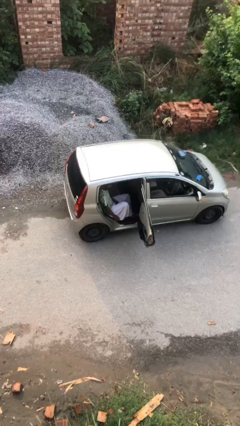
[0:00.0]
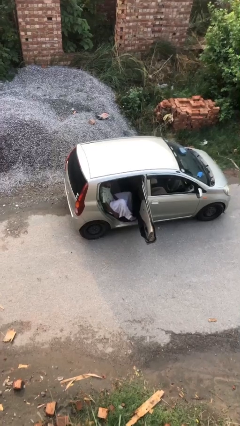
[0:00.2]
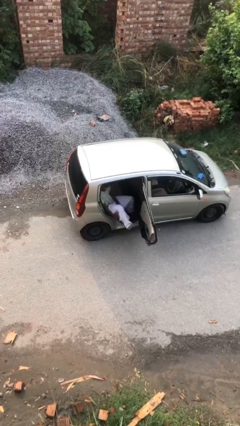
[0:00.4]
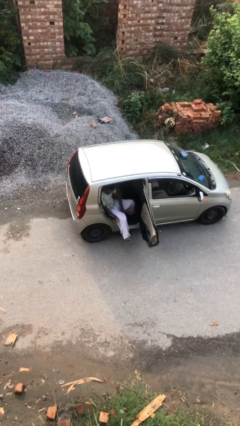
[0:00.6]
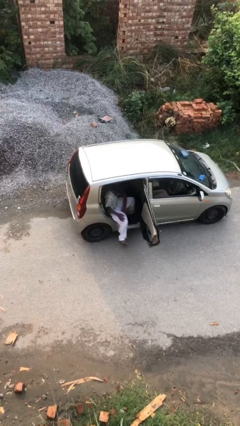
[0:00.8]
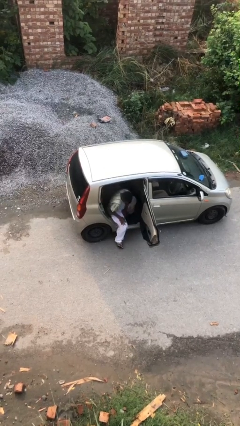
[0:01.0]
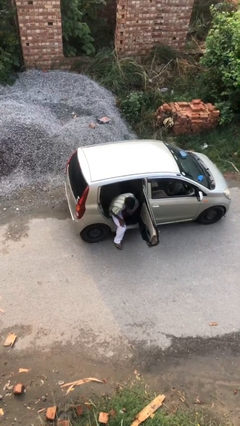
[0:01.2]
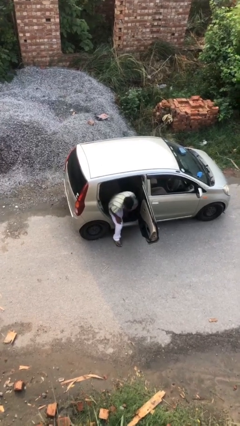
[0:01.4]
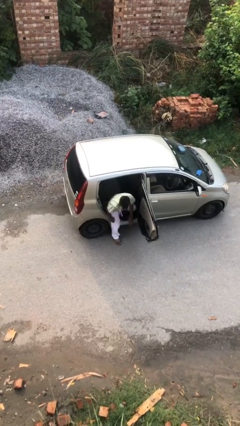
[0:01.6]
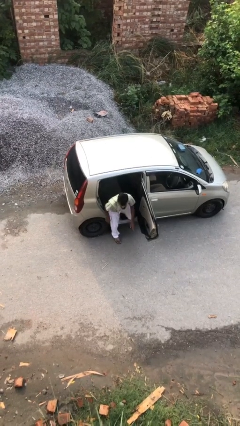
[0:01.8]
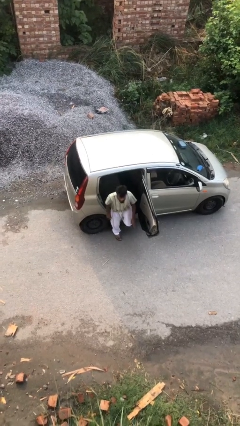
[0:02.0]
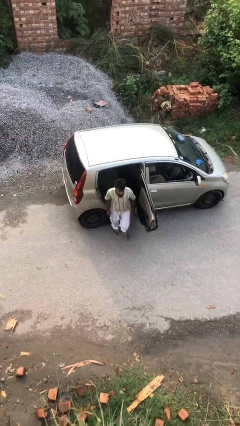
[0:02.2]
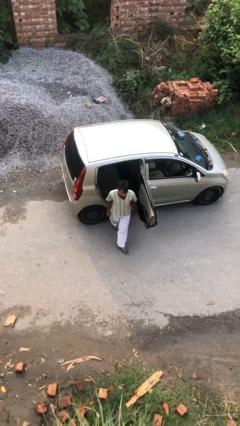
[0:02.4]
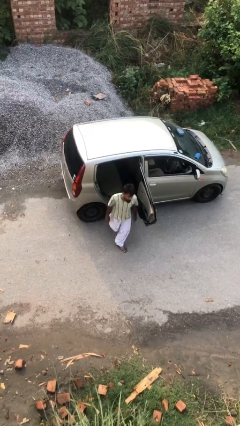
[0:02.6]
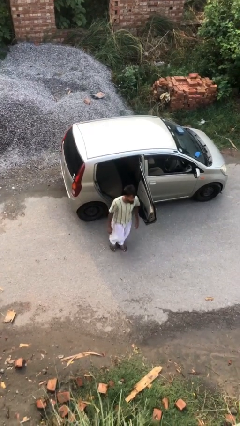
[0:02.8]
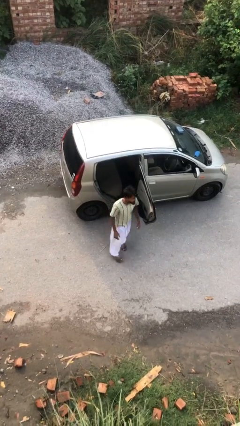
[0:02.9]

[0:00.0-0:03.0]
person exits car

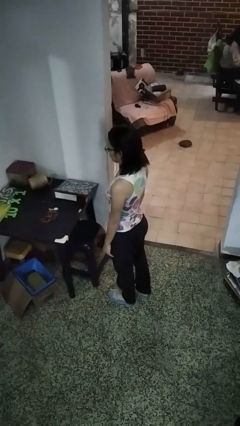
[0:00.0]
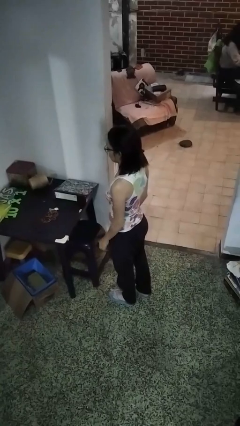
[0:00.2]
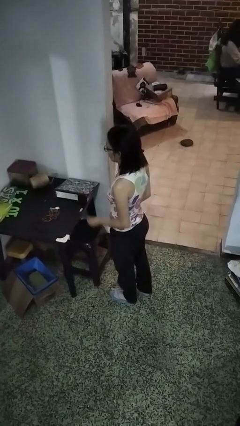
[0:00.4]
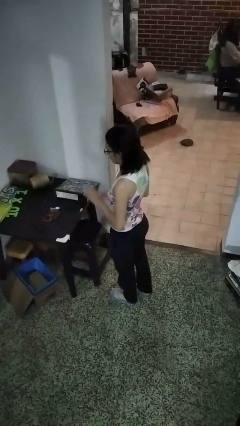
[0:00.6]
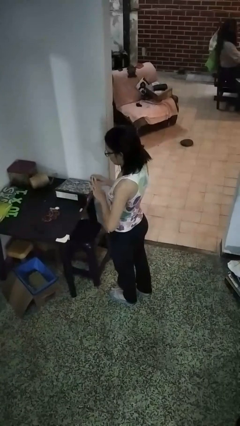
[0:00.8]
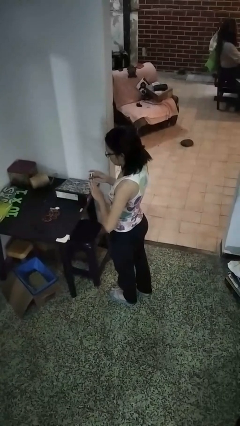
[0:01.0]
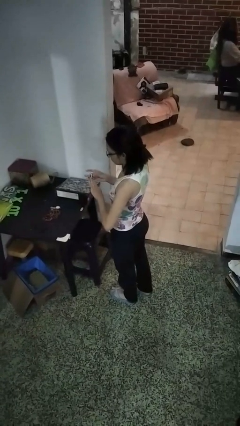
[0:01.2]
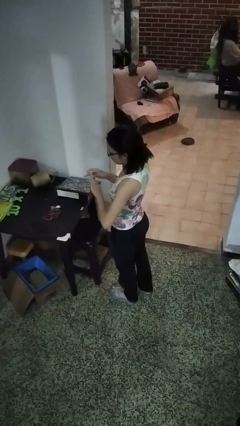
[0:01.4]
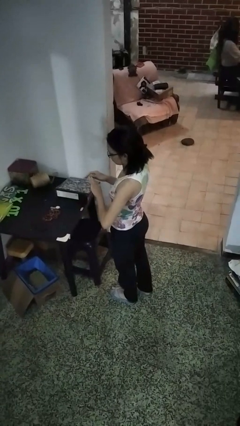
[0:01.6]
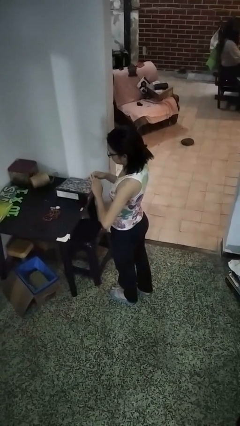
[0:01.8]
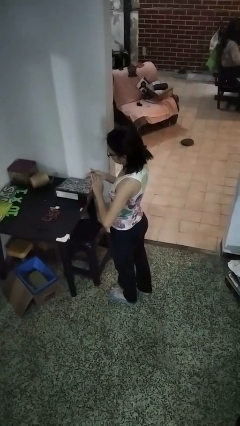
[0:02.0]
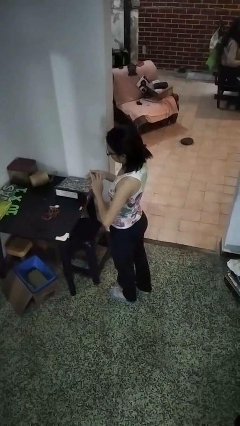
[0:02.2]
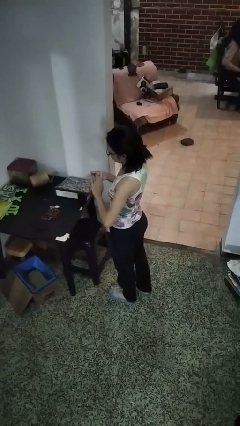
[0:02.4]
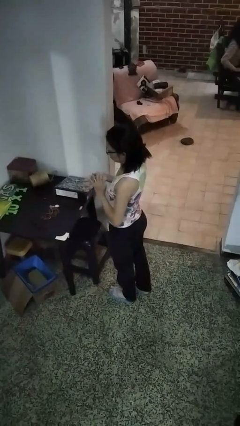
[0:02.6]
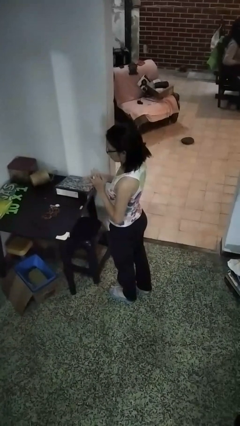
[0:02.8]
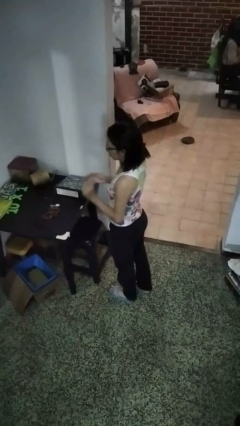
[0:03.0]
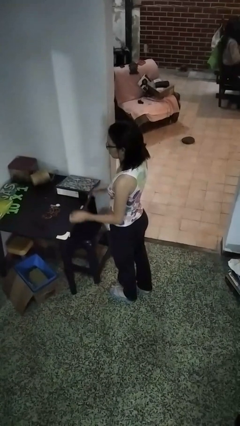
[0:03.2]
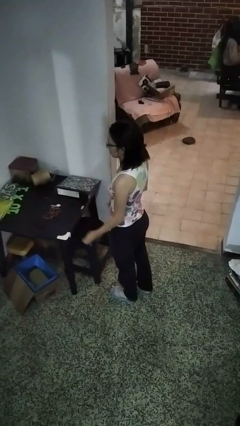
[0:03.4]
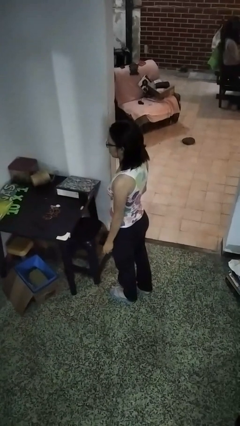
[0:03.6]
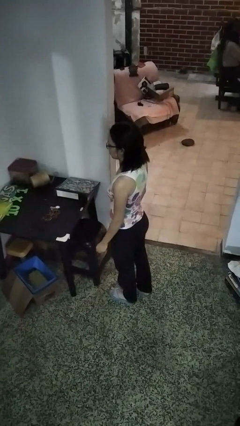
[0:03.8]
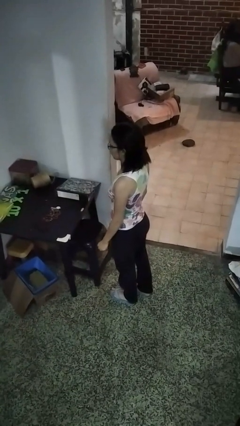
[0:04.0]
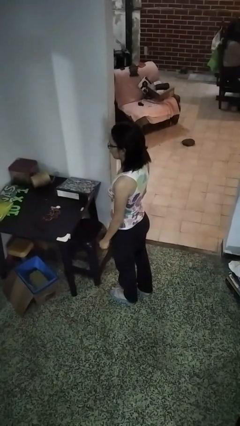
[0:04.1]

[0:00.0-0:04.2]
person puts on ring

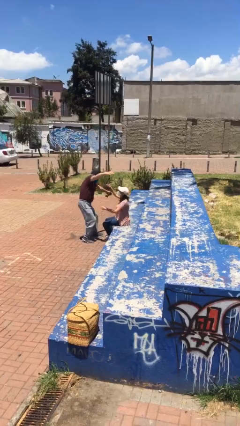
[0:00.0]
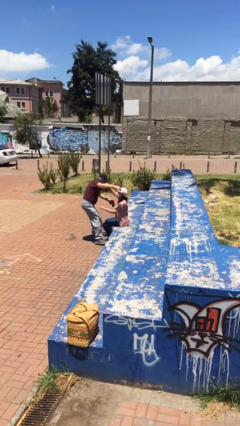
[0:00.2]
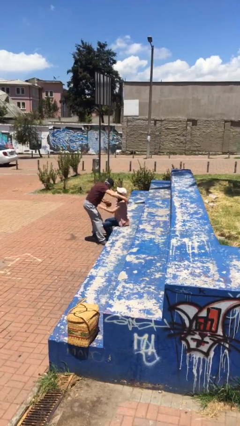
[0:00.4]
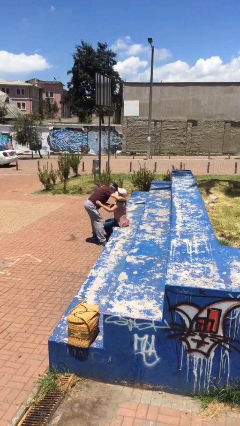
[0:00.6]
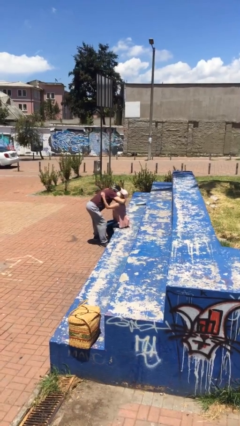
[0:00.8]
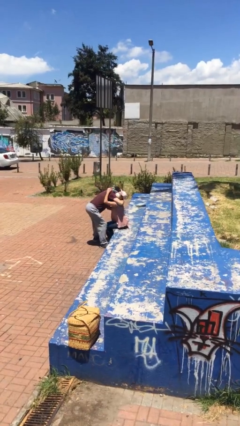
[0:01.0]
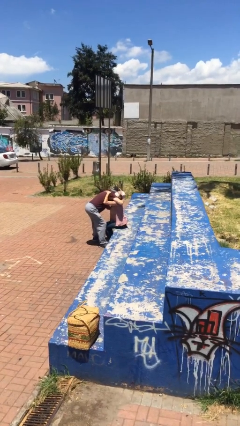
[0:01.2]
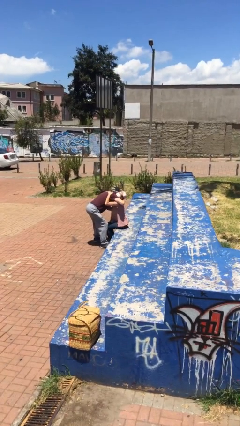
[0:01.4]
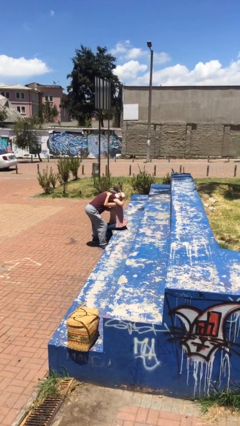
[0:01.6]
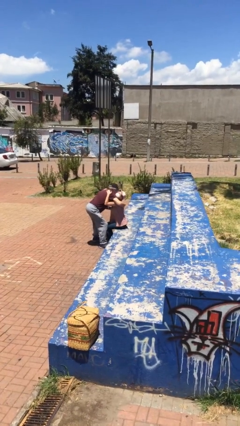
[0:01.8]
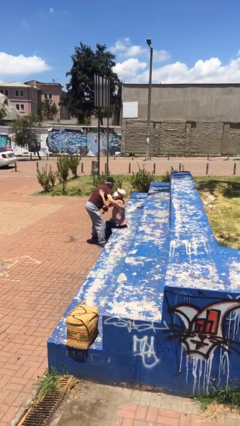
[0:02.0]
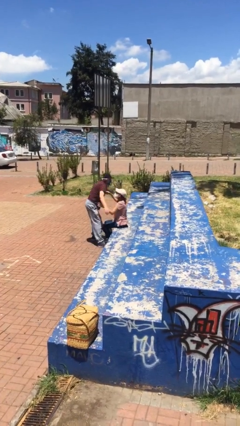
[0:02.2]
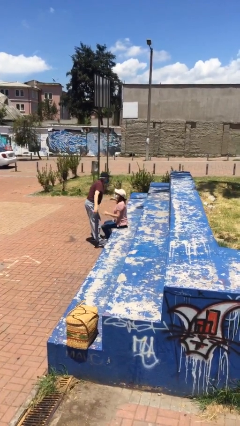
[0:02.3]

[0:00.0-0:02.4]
person embraces person

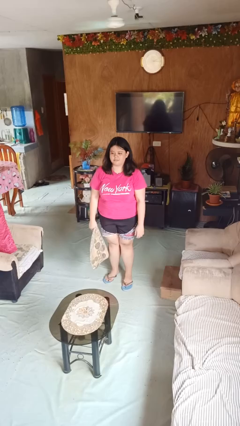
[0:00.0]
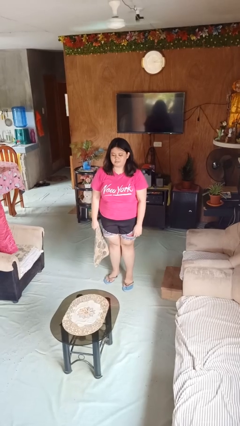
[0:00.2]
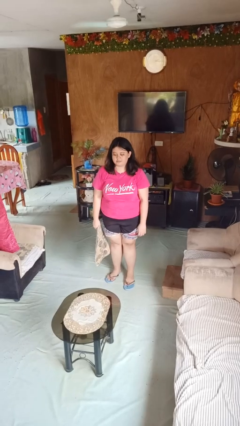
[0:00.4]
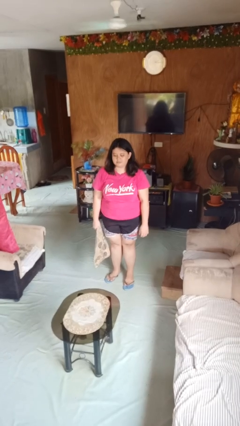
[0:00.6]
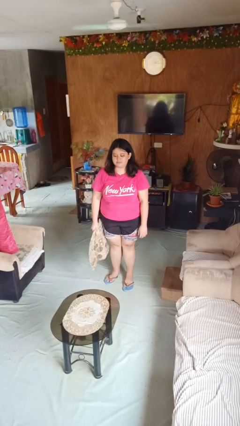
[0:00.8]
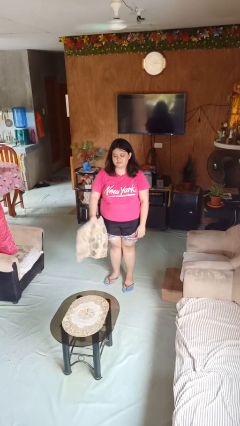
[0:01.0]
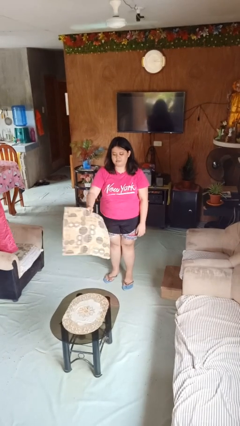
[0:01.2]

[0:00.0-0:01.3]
person throws object on table

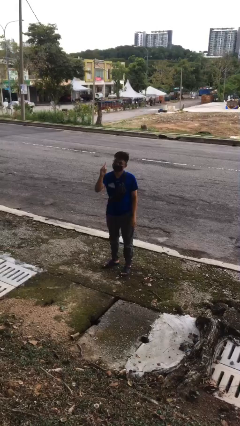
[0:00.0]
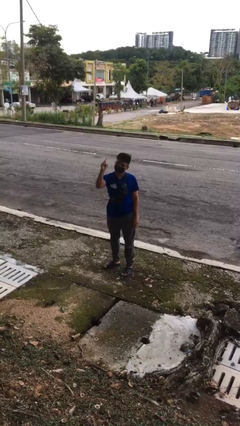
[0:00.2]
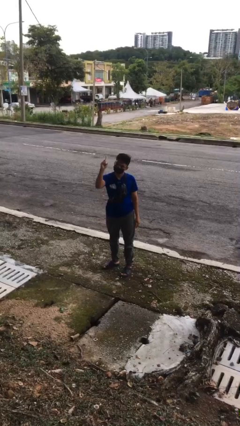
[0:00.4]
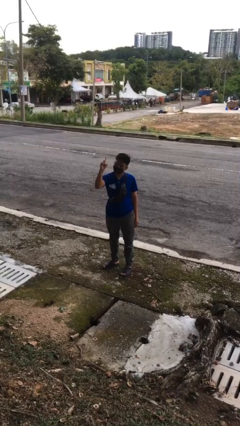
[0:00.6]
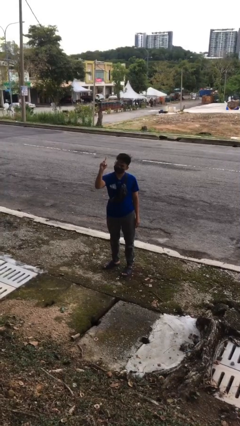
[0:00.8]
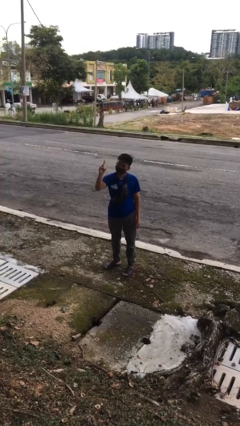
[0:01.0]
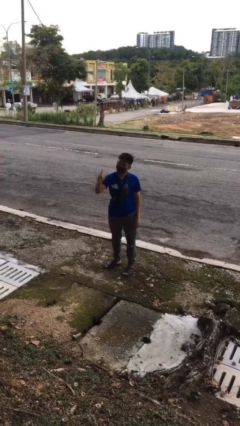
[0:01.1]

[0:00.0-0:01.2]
person gestures number one

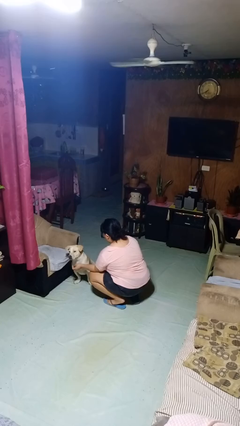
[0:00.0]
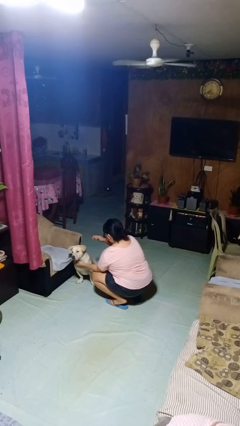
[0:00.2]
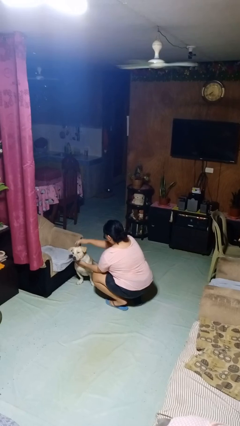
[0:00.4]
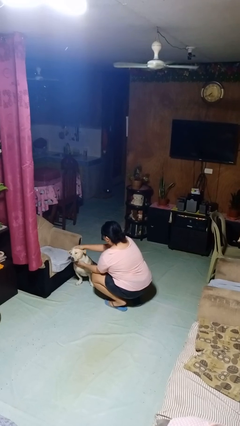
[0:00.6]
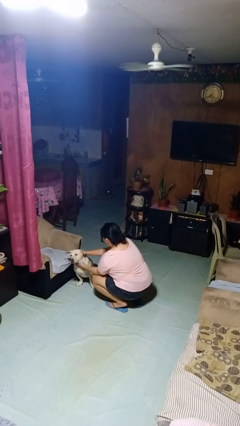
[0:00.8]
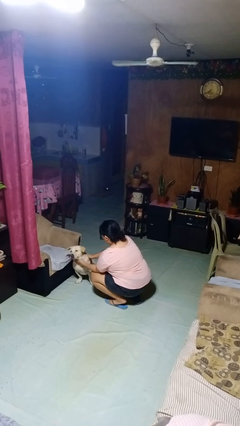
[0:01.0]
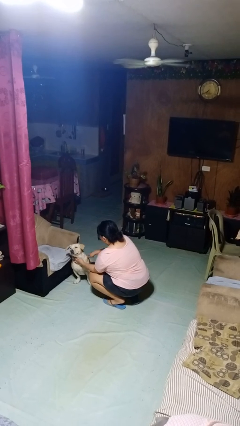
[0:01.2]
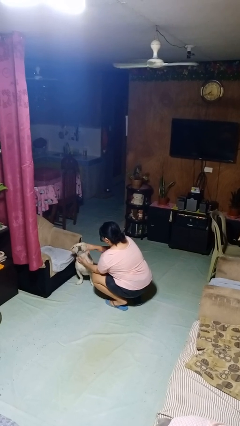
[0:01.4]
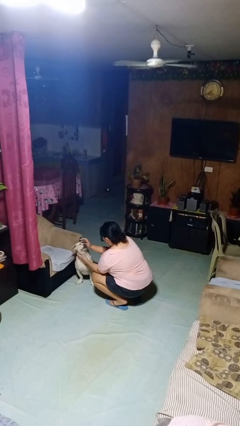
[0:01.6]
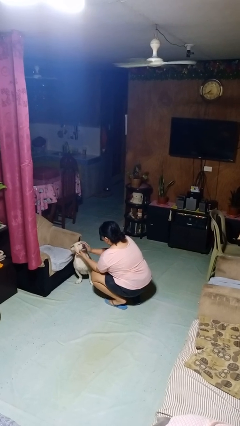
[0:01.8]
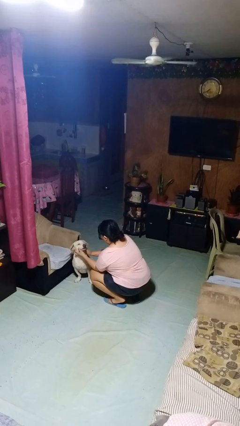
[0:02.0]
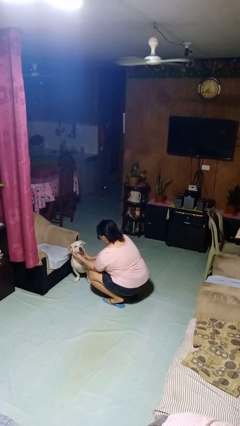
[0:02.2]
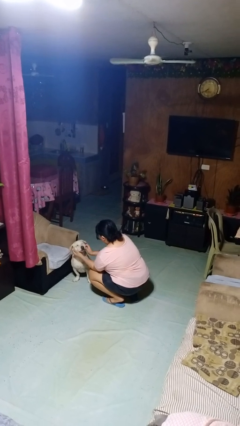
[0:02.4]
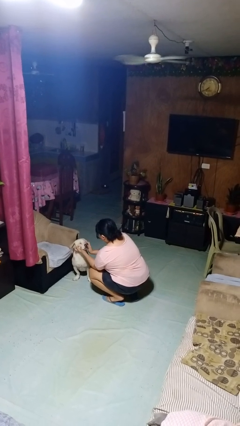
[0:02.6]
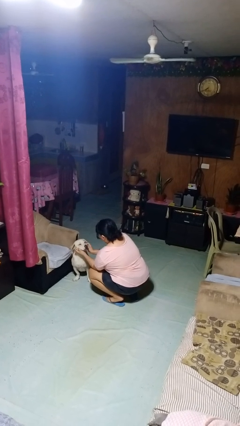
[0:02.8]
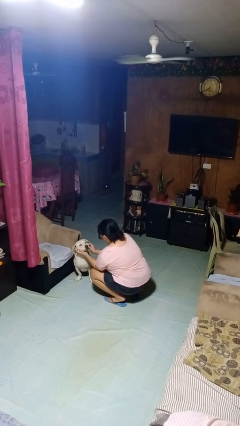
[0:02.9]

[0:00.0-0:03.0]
person pets dog

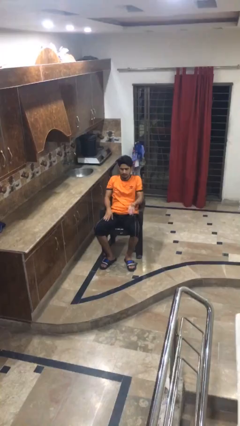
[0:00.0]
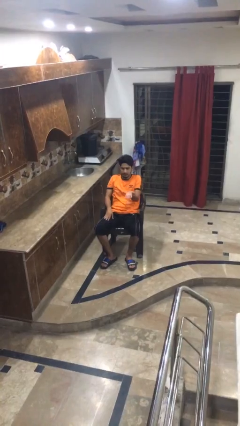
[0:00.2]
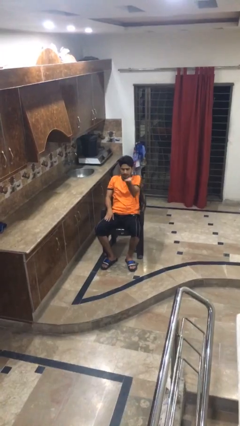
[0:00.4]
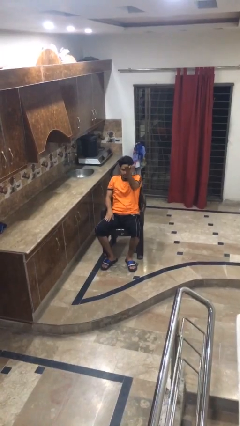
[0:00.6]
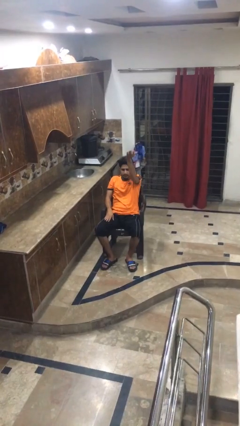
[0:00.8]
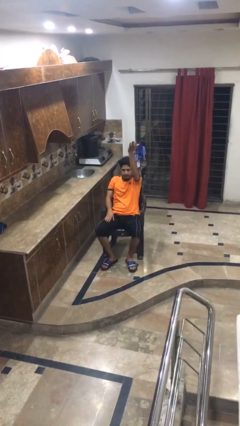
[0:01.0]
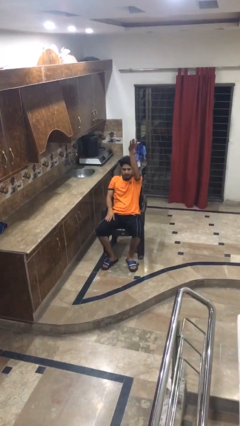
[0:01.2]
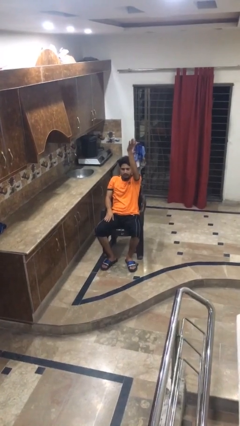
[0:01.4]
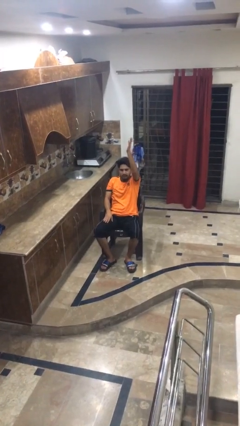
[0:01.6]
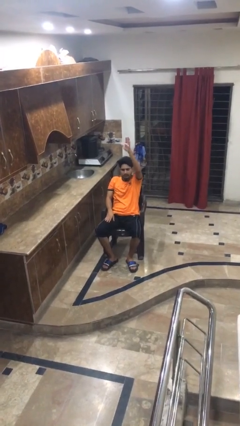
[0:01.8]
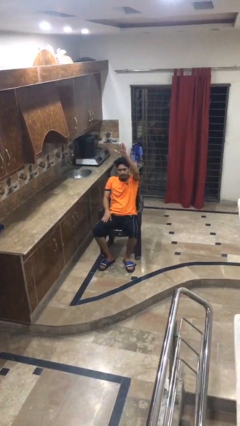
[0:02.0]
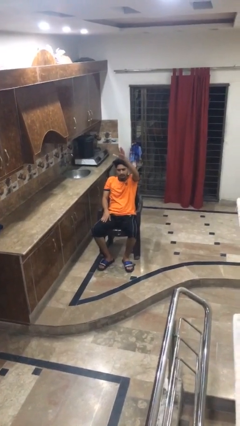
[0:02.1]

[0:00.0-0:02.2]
person gestures swipe up
